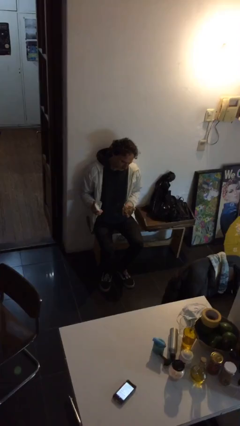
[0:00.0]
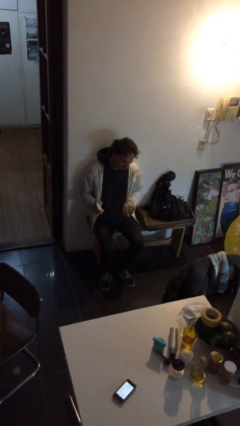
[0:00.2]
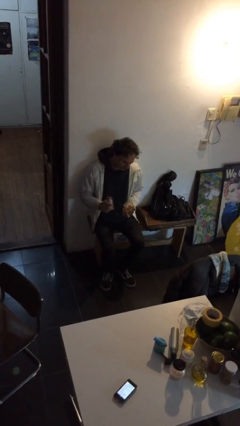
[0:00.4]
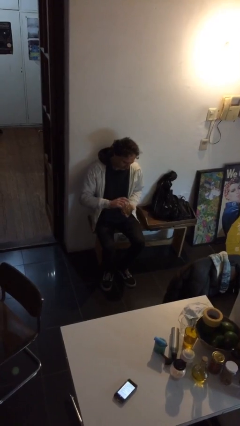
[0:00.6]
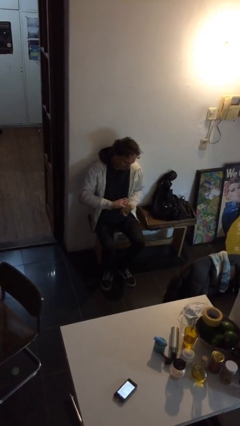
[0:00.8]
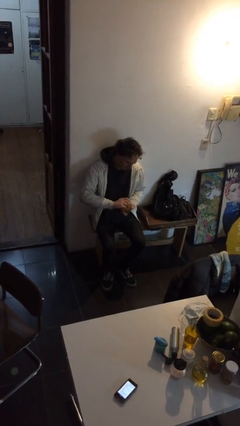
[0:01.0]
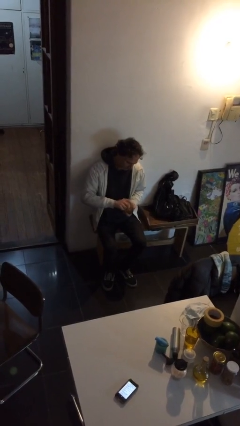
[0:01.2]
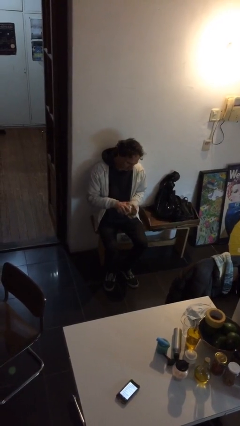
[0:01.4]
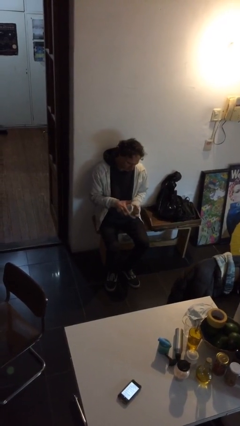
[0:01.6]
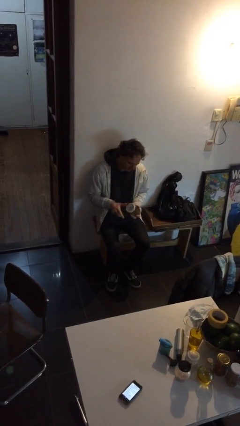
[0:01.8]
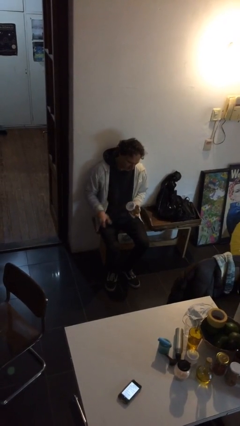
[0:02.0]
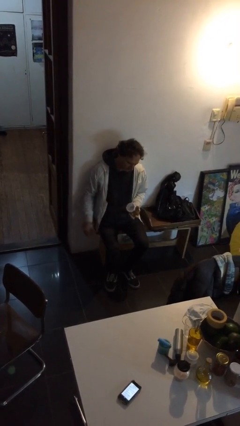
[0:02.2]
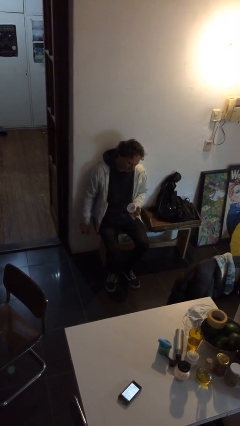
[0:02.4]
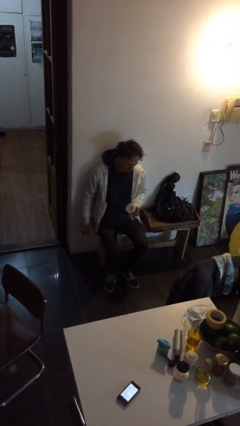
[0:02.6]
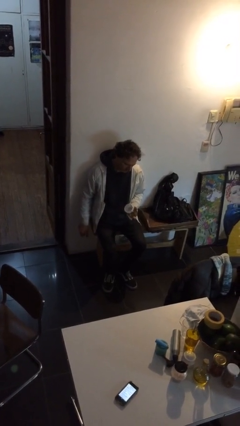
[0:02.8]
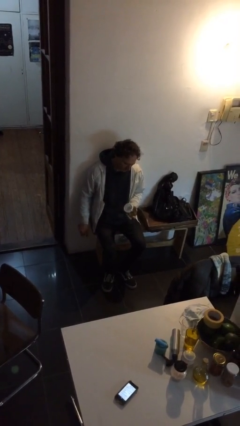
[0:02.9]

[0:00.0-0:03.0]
person closes jar

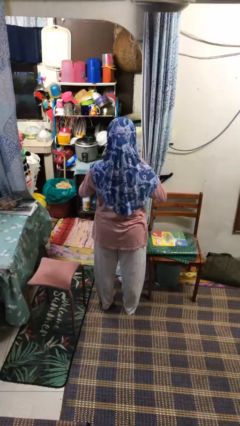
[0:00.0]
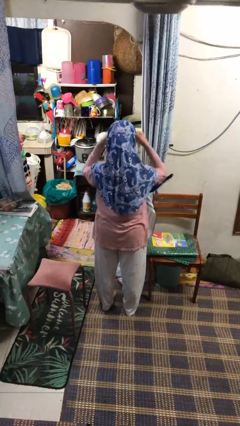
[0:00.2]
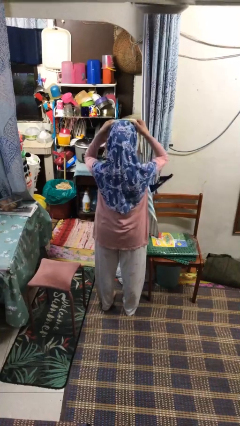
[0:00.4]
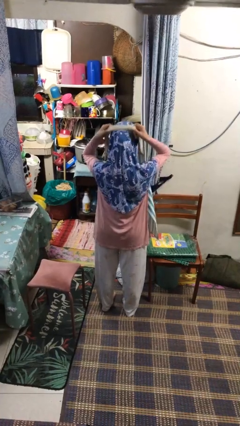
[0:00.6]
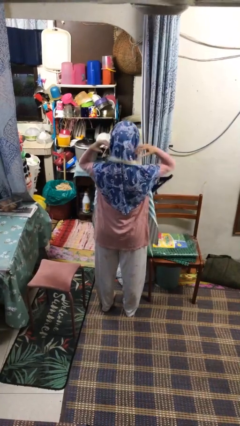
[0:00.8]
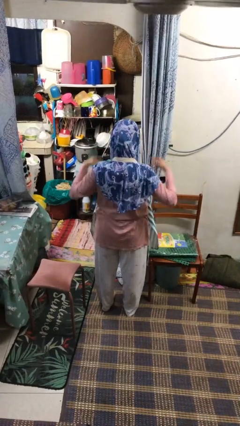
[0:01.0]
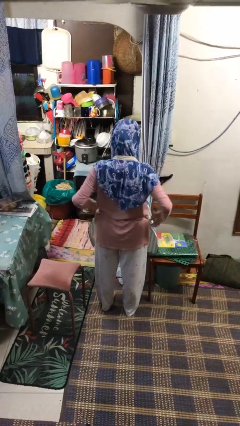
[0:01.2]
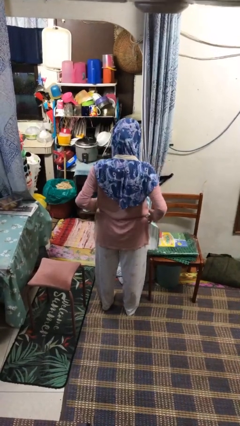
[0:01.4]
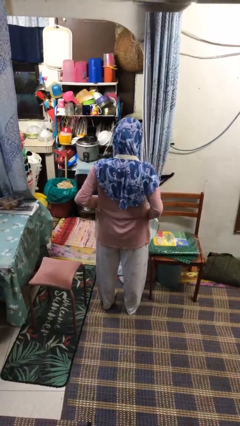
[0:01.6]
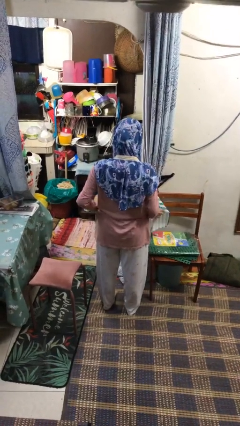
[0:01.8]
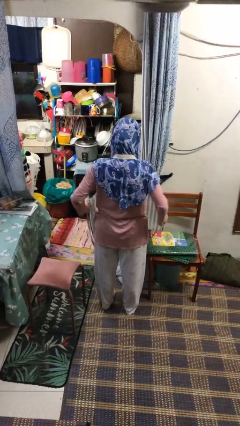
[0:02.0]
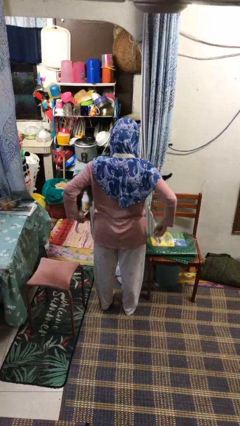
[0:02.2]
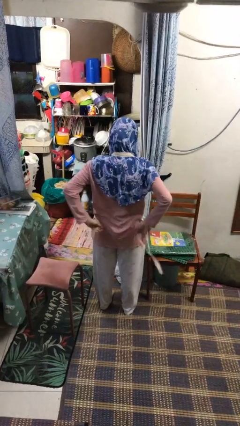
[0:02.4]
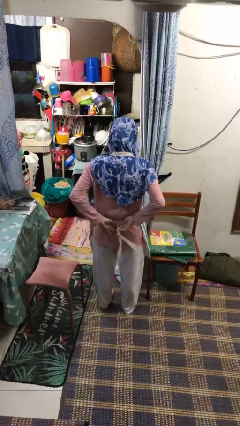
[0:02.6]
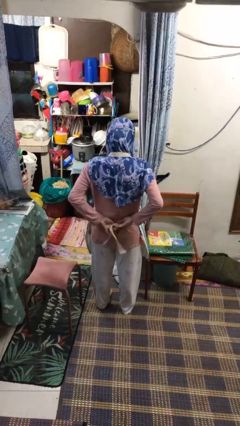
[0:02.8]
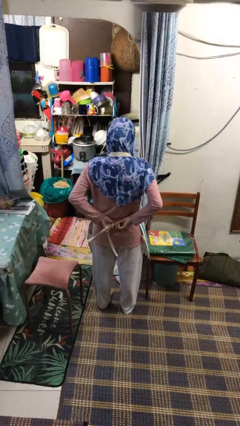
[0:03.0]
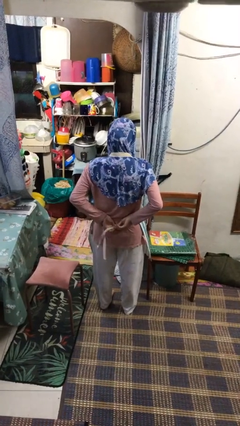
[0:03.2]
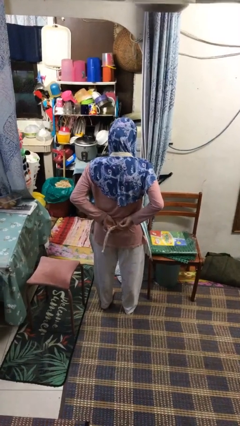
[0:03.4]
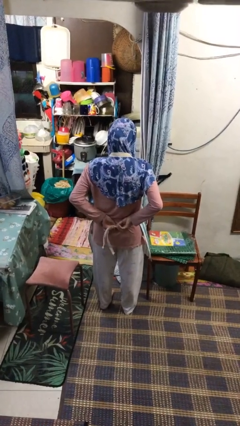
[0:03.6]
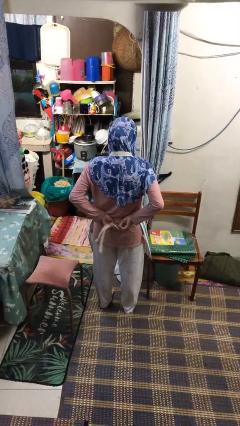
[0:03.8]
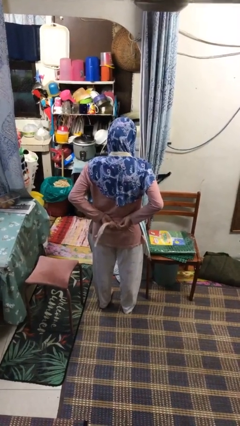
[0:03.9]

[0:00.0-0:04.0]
person puts on apron

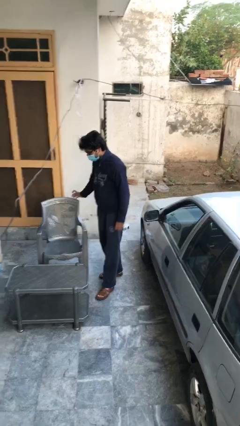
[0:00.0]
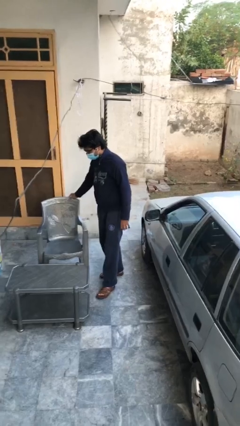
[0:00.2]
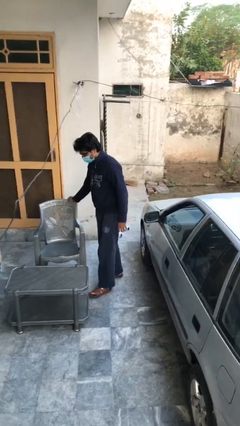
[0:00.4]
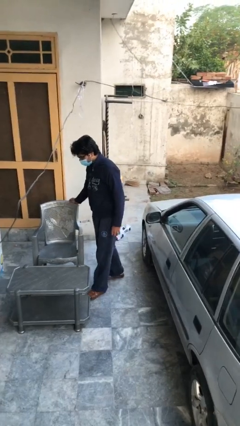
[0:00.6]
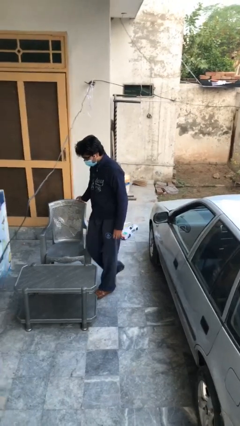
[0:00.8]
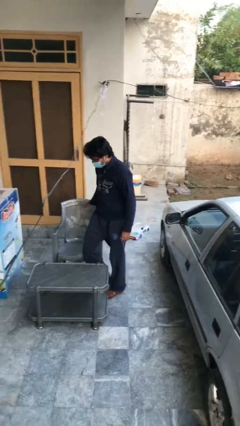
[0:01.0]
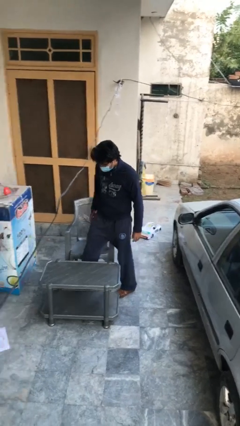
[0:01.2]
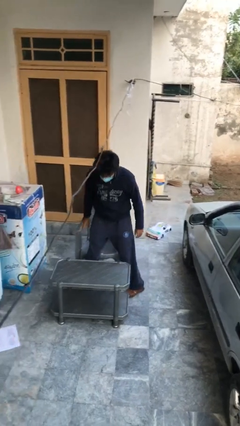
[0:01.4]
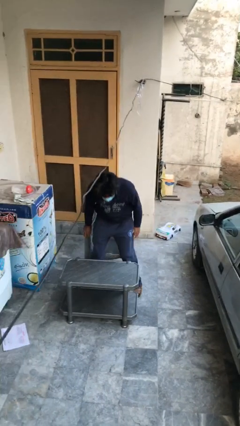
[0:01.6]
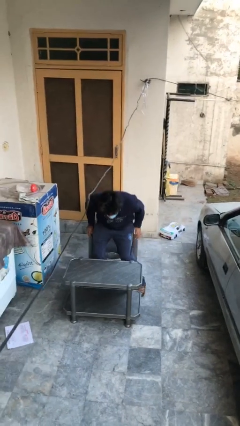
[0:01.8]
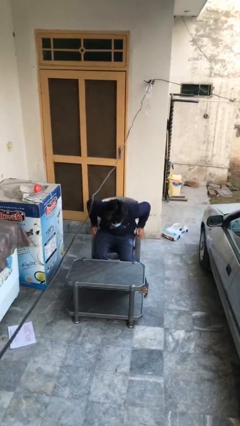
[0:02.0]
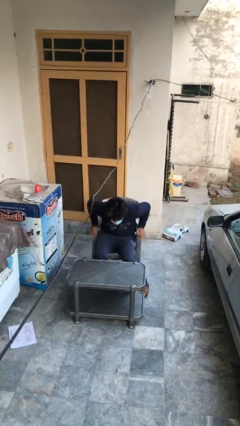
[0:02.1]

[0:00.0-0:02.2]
person sits down

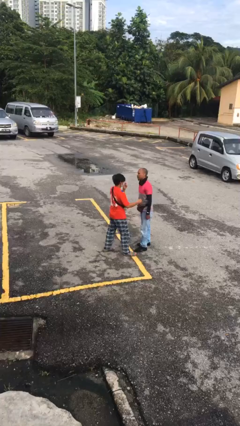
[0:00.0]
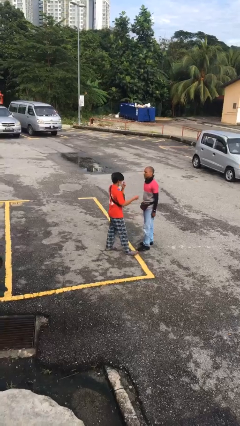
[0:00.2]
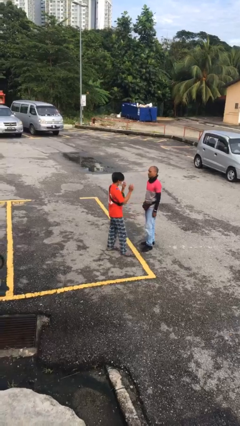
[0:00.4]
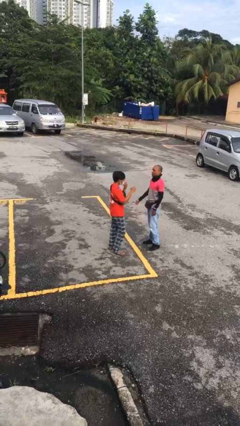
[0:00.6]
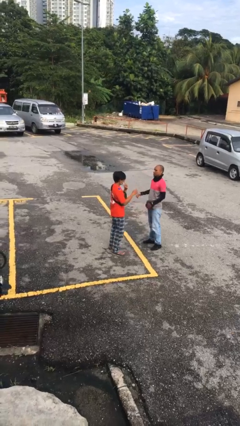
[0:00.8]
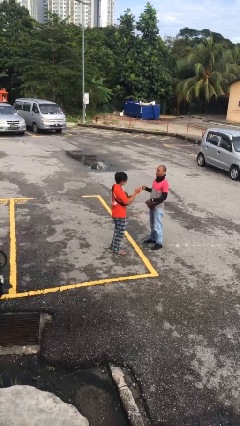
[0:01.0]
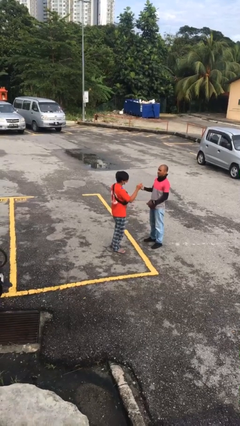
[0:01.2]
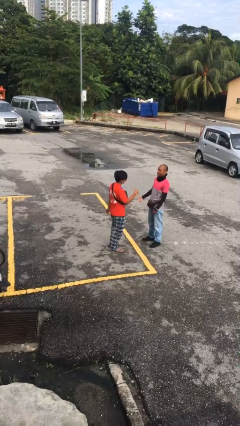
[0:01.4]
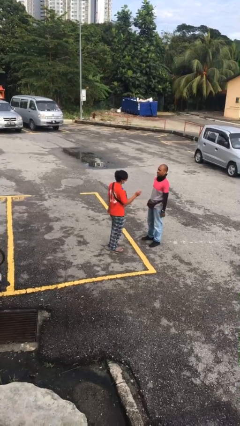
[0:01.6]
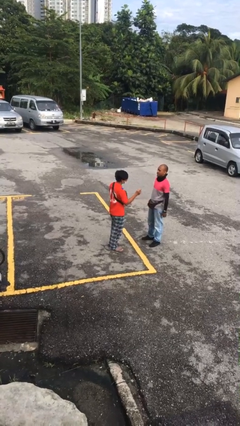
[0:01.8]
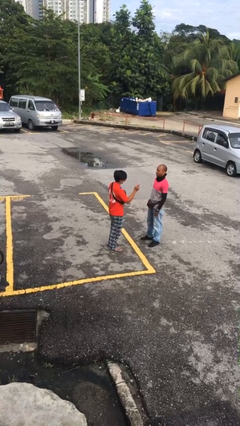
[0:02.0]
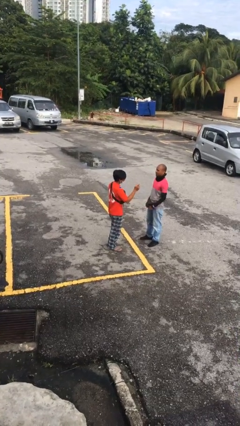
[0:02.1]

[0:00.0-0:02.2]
person talks to person

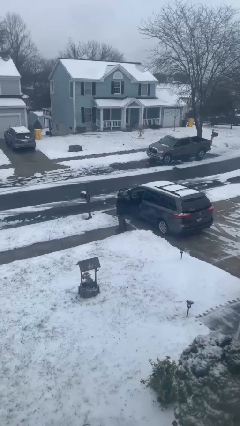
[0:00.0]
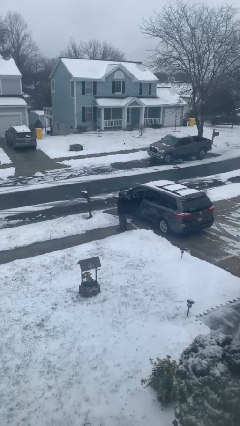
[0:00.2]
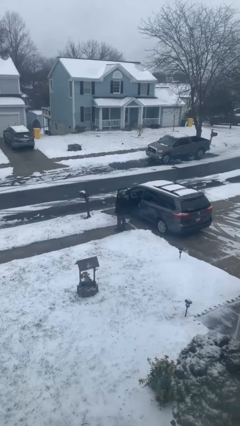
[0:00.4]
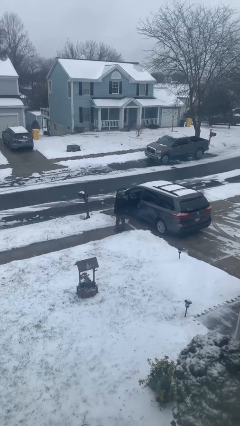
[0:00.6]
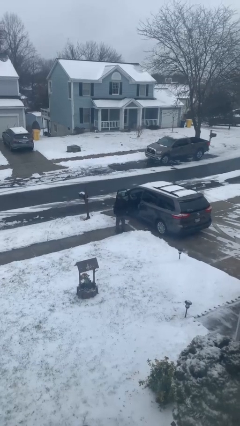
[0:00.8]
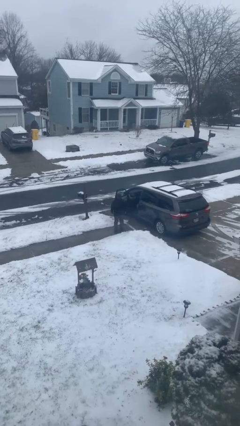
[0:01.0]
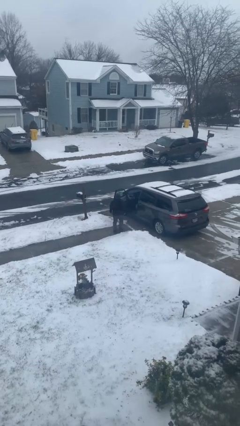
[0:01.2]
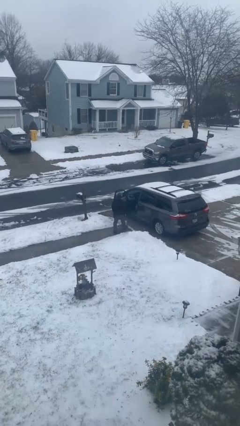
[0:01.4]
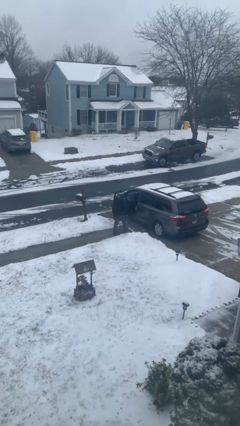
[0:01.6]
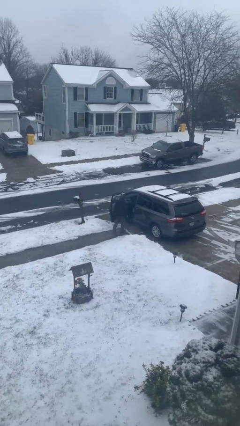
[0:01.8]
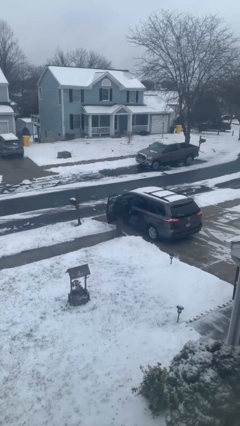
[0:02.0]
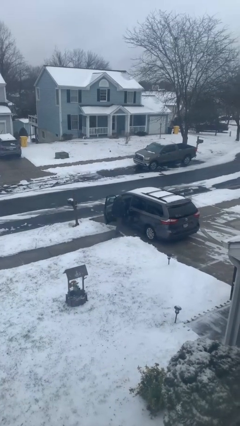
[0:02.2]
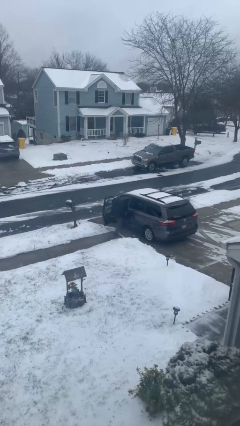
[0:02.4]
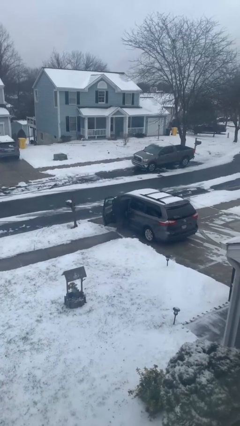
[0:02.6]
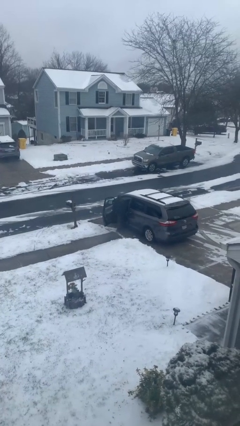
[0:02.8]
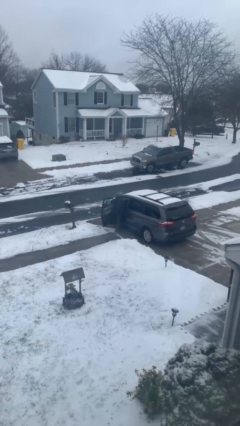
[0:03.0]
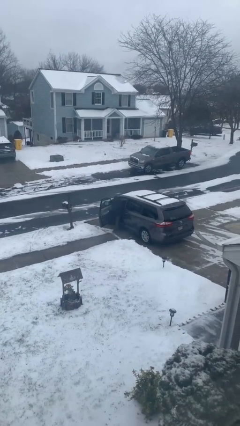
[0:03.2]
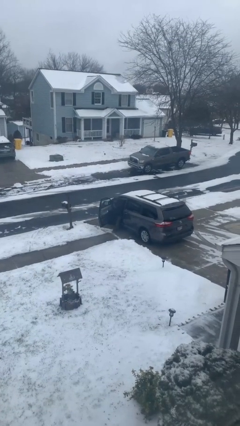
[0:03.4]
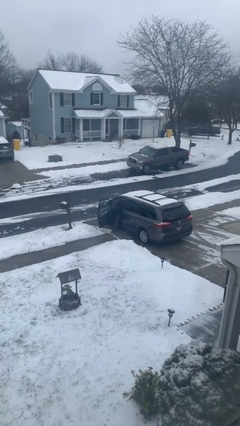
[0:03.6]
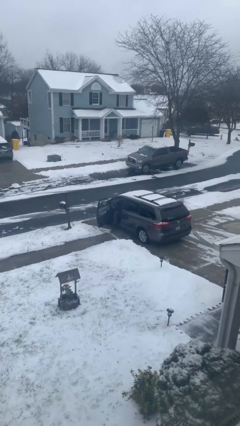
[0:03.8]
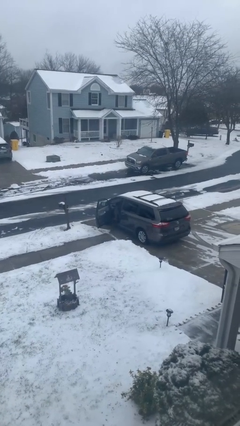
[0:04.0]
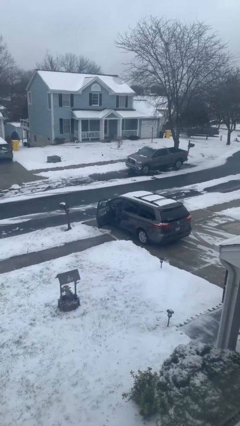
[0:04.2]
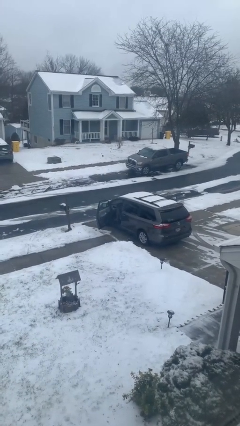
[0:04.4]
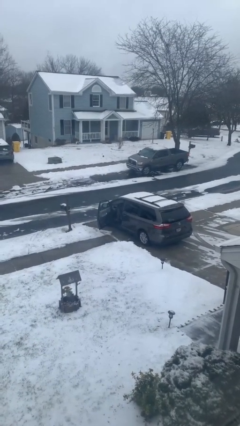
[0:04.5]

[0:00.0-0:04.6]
person enters car

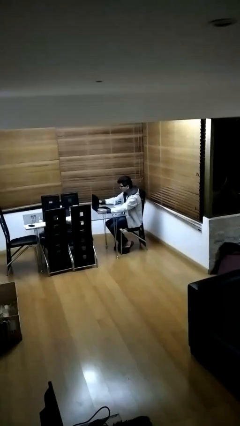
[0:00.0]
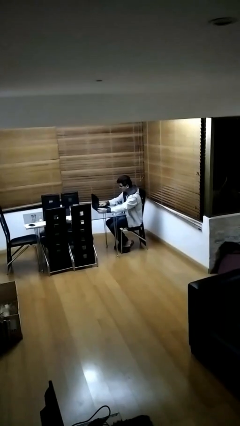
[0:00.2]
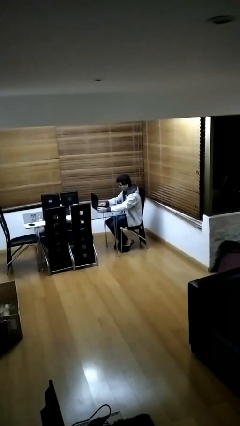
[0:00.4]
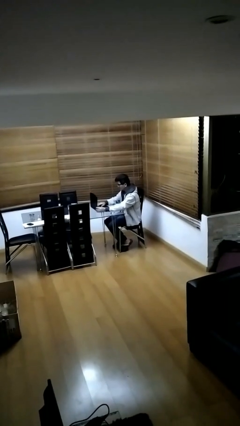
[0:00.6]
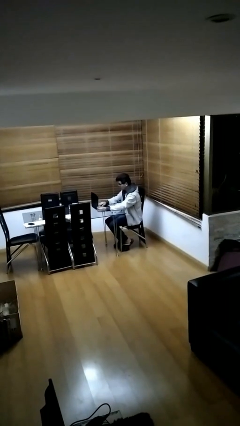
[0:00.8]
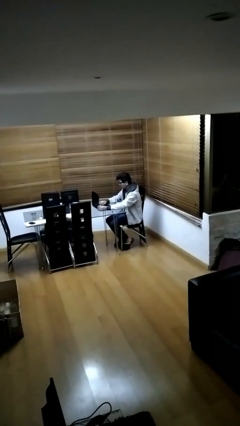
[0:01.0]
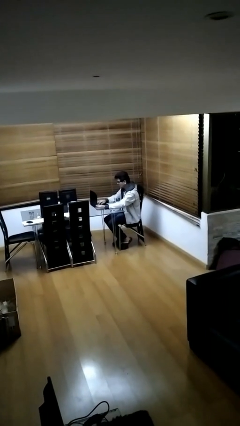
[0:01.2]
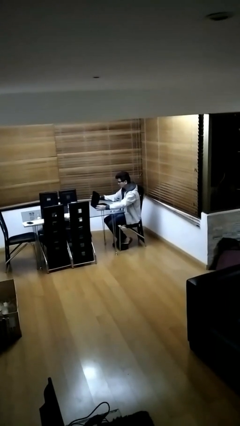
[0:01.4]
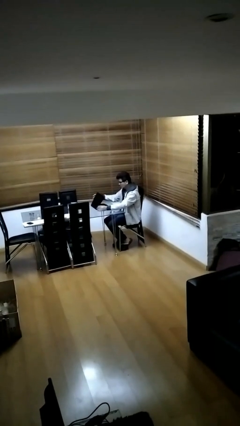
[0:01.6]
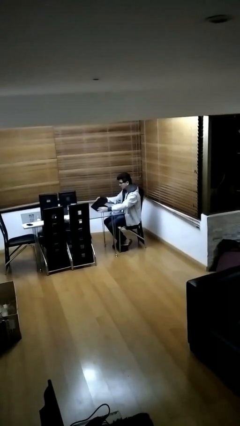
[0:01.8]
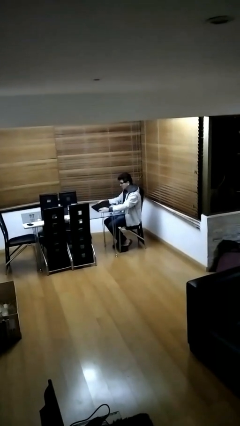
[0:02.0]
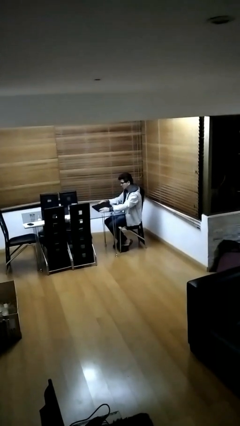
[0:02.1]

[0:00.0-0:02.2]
person interacts with laptop
